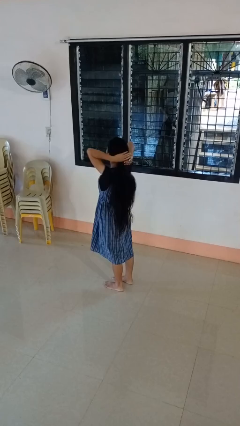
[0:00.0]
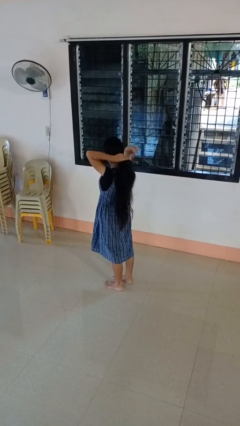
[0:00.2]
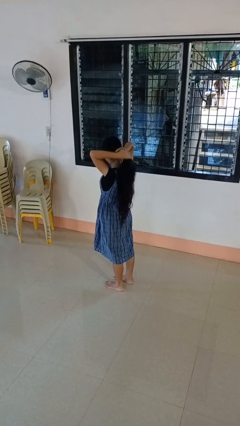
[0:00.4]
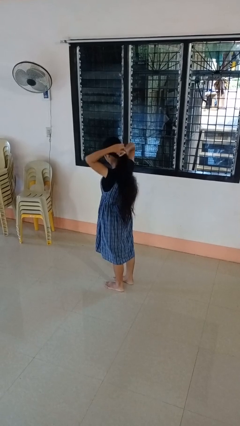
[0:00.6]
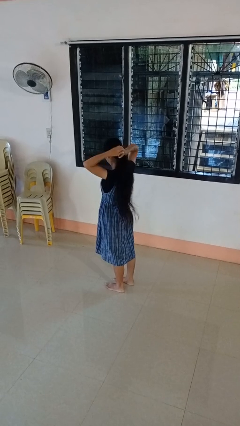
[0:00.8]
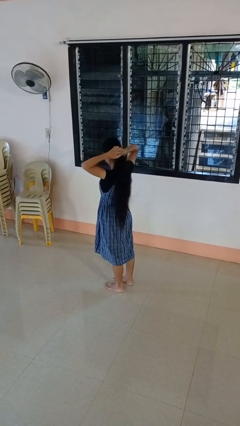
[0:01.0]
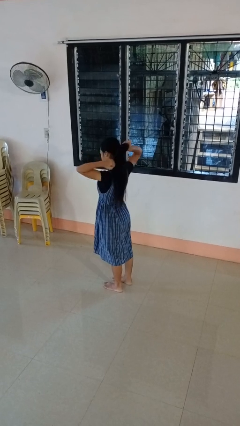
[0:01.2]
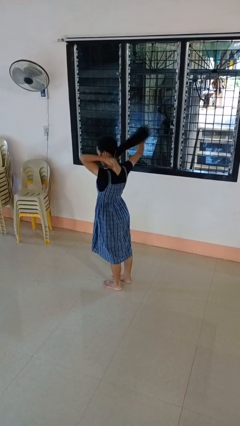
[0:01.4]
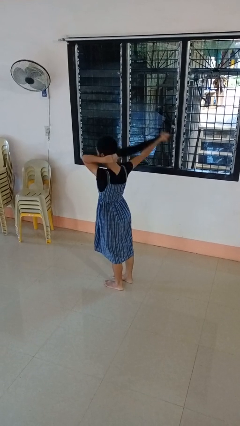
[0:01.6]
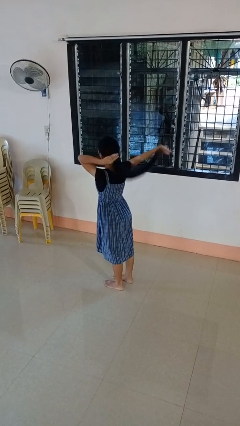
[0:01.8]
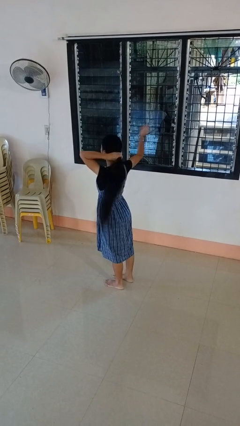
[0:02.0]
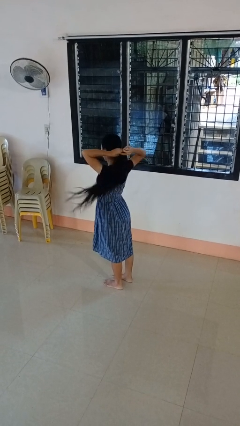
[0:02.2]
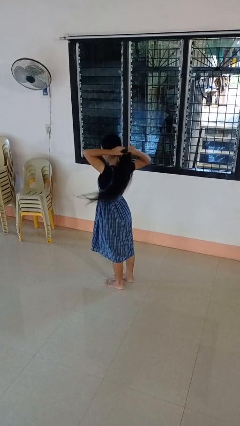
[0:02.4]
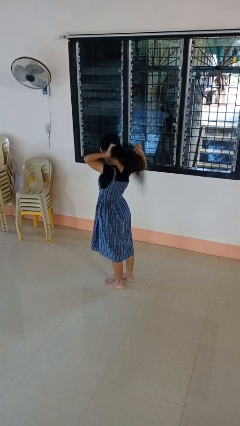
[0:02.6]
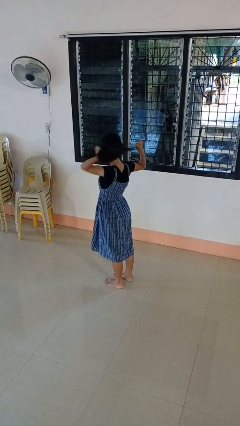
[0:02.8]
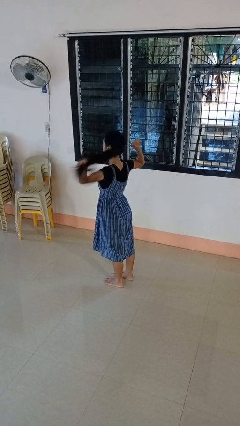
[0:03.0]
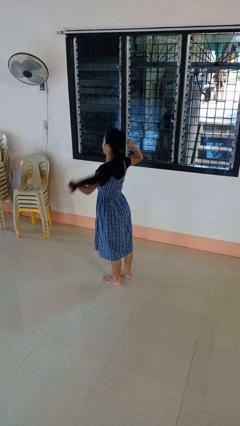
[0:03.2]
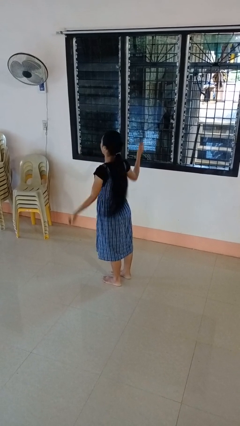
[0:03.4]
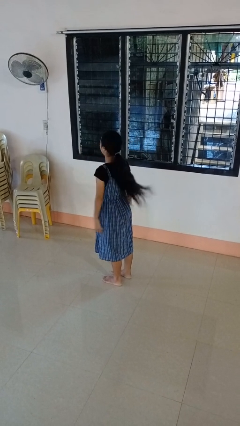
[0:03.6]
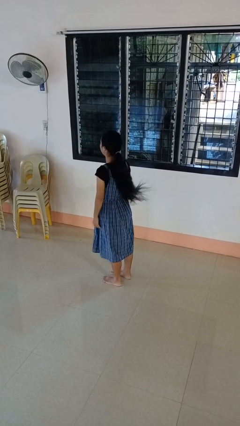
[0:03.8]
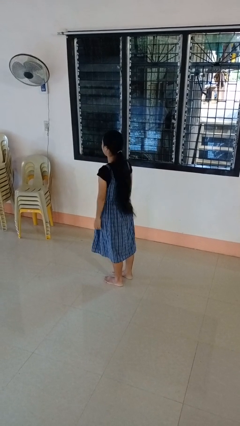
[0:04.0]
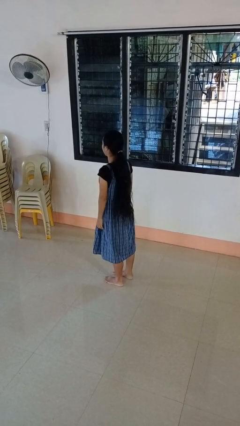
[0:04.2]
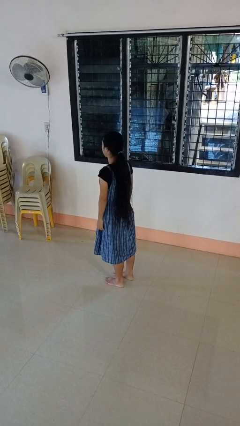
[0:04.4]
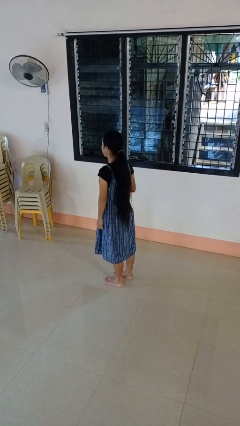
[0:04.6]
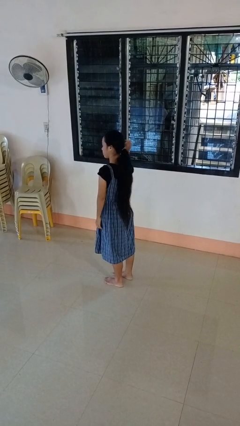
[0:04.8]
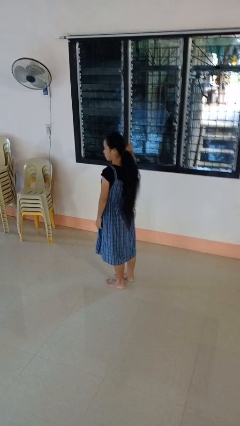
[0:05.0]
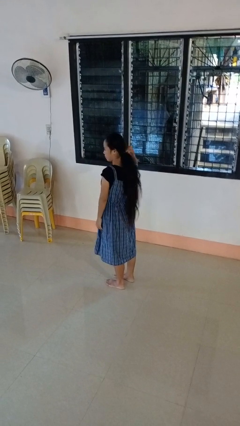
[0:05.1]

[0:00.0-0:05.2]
person puts hair in ponytail

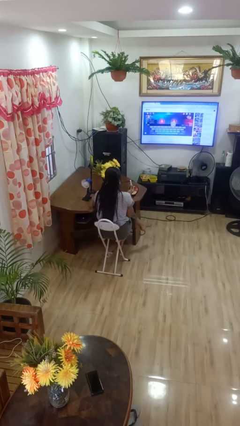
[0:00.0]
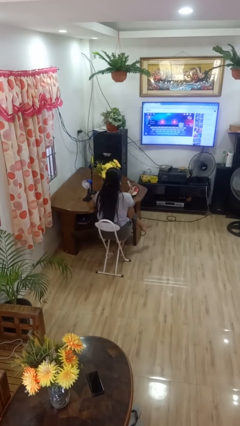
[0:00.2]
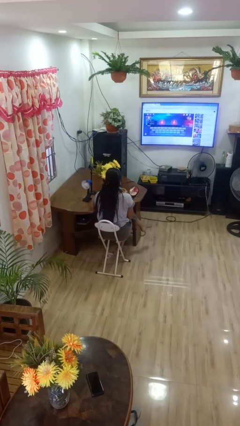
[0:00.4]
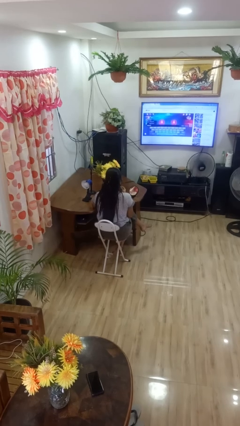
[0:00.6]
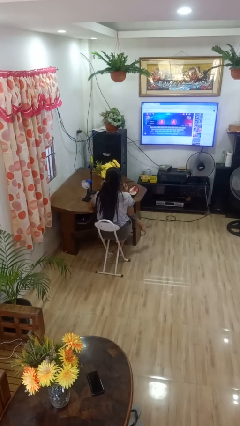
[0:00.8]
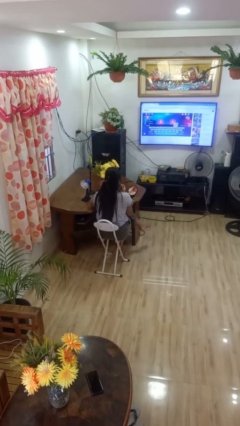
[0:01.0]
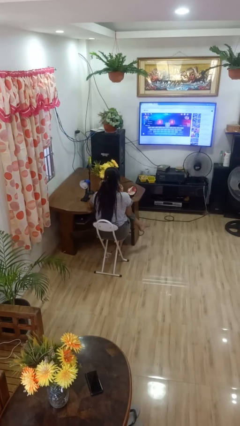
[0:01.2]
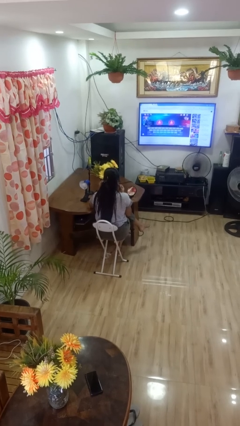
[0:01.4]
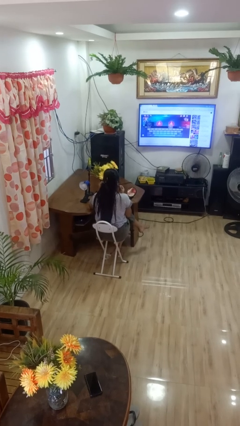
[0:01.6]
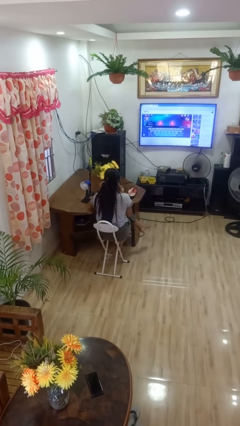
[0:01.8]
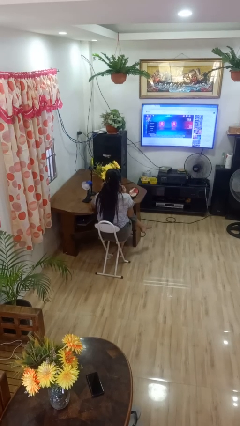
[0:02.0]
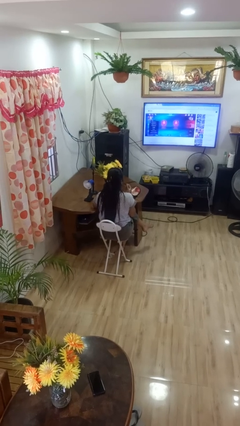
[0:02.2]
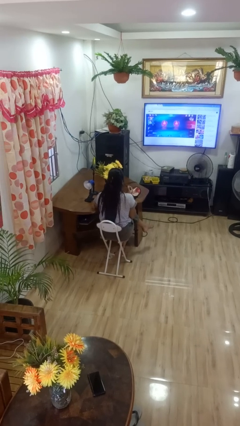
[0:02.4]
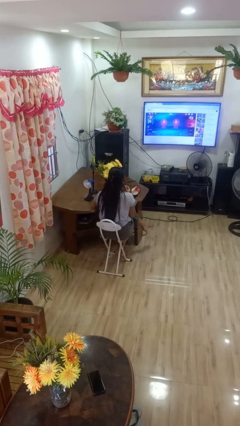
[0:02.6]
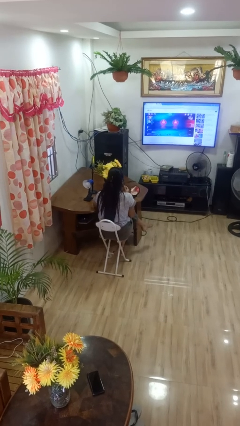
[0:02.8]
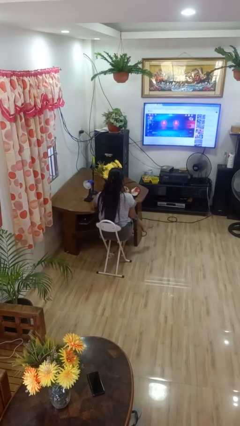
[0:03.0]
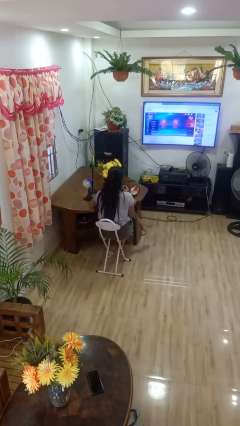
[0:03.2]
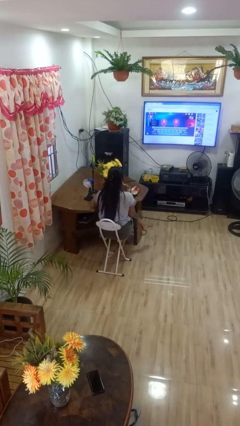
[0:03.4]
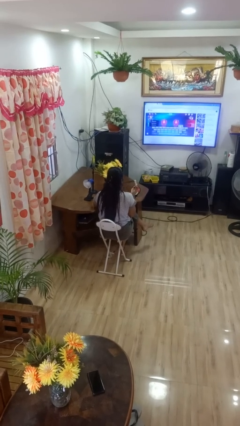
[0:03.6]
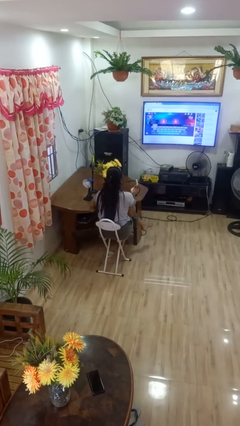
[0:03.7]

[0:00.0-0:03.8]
person applies lip makeup

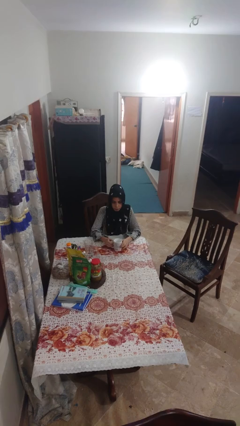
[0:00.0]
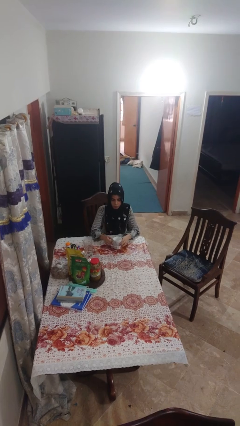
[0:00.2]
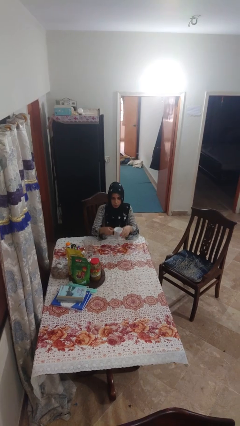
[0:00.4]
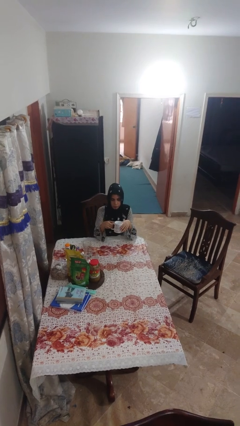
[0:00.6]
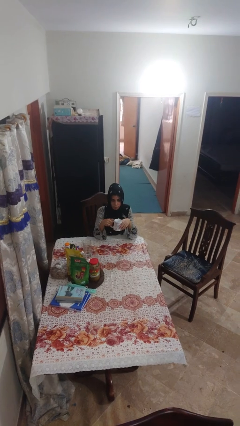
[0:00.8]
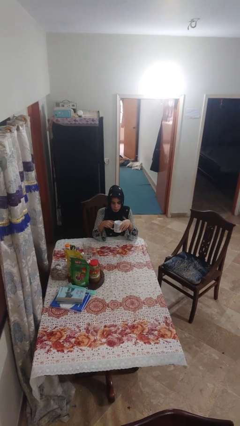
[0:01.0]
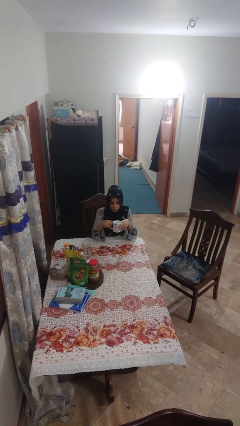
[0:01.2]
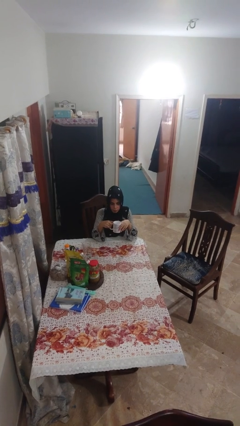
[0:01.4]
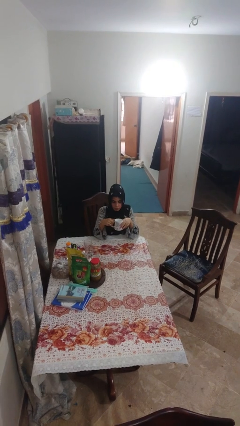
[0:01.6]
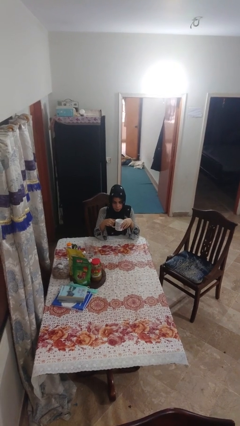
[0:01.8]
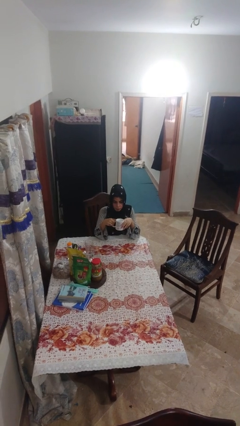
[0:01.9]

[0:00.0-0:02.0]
person picks up object from table

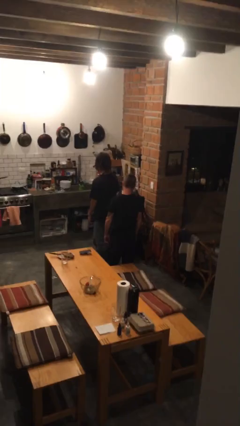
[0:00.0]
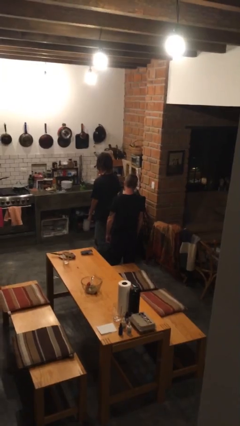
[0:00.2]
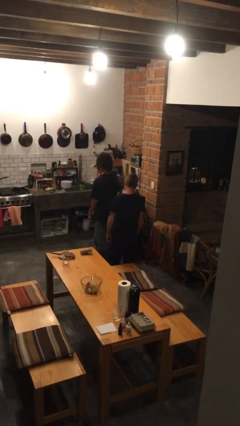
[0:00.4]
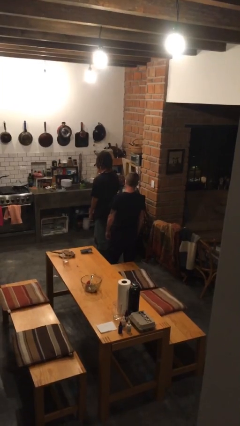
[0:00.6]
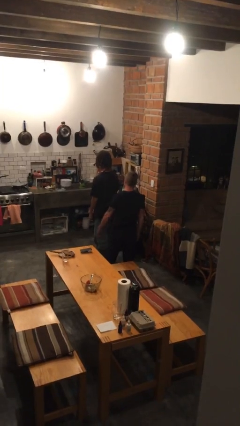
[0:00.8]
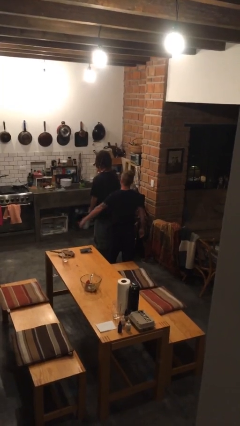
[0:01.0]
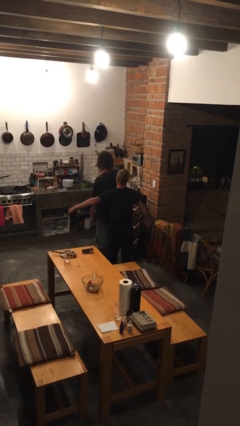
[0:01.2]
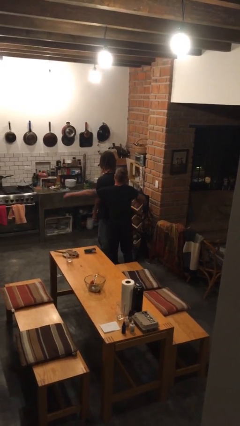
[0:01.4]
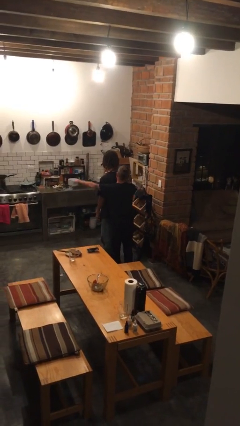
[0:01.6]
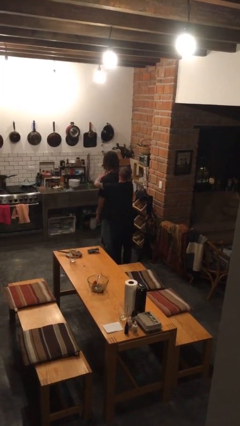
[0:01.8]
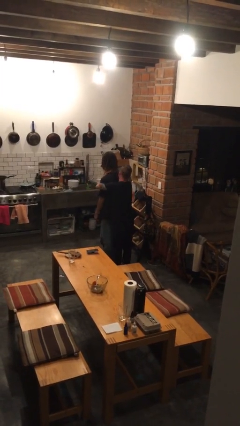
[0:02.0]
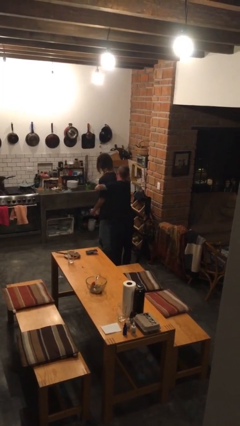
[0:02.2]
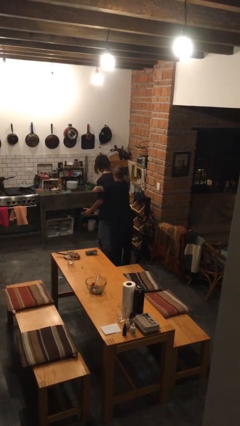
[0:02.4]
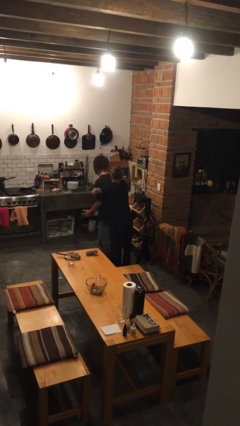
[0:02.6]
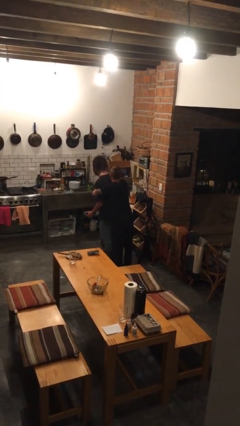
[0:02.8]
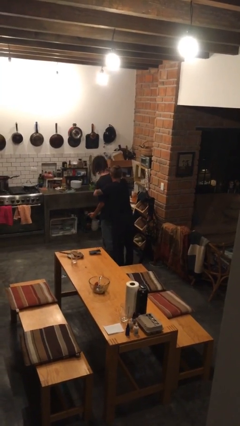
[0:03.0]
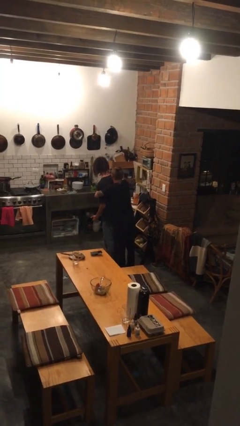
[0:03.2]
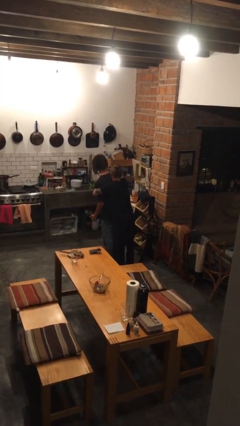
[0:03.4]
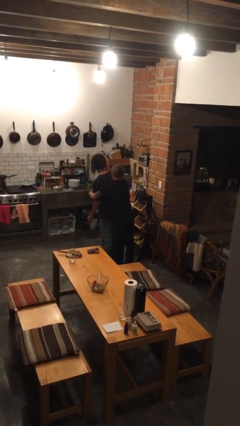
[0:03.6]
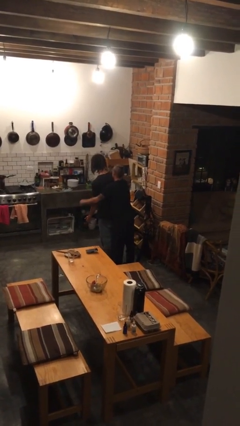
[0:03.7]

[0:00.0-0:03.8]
person hugs person from behind

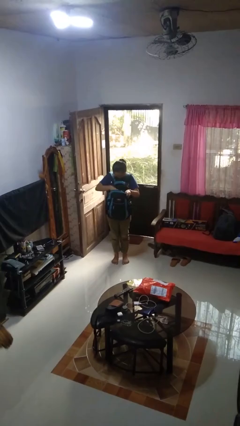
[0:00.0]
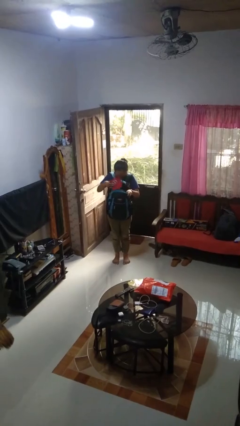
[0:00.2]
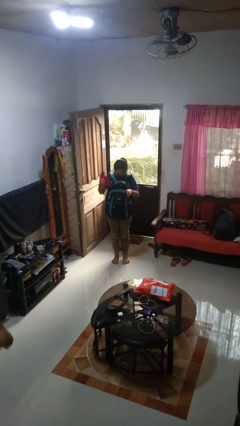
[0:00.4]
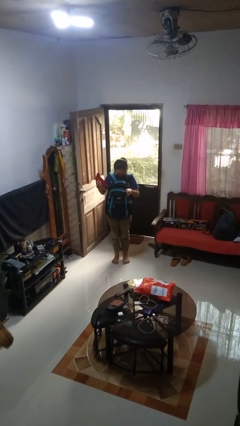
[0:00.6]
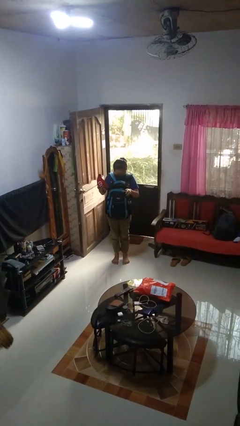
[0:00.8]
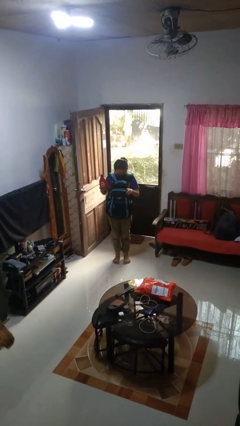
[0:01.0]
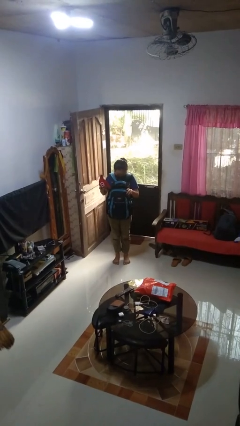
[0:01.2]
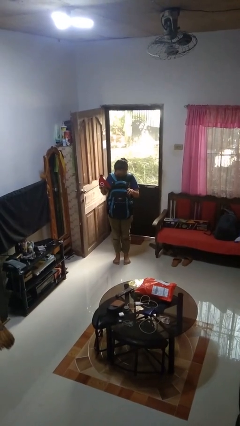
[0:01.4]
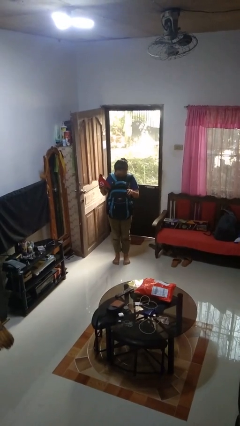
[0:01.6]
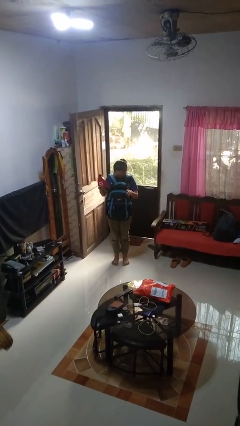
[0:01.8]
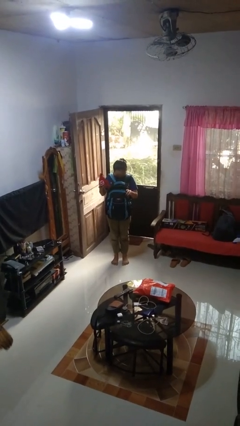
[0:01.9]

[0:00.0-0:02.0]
person takes object from backpack

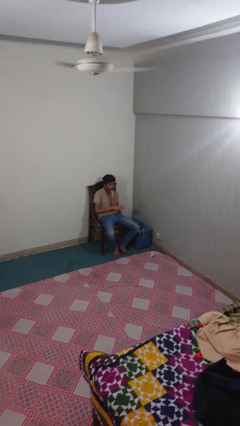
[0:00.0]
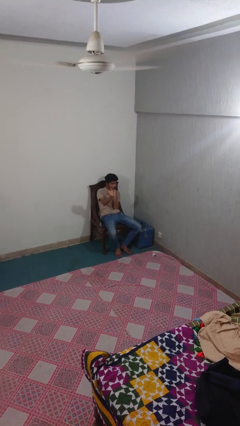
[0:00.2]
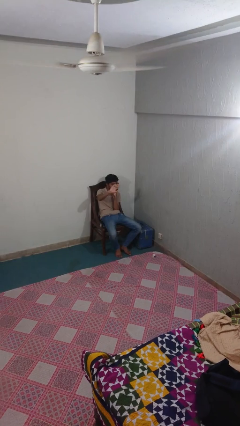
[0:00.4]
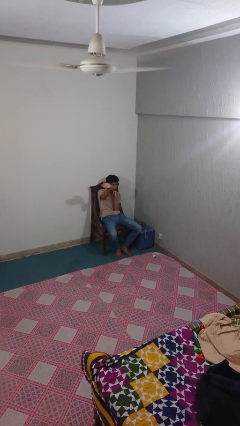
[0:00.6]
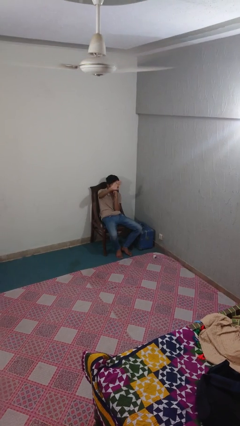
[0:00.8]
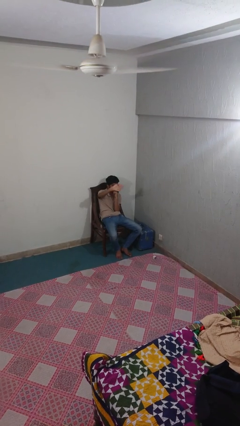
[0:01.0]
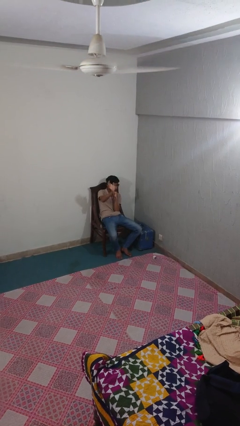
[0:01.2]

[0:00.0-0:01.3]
person waves at person
